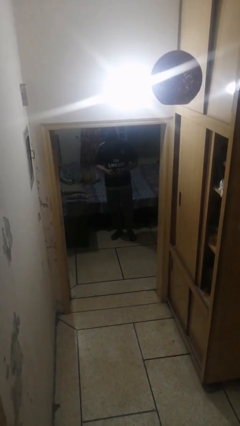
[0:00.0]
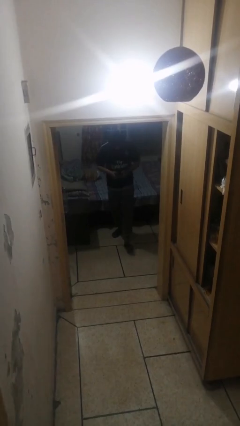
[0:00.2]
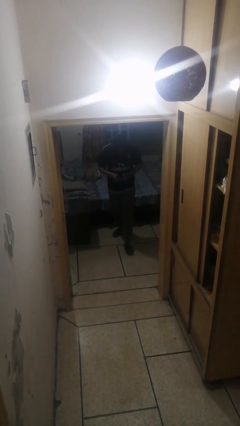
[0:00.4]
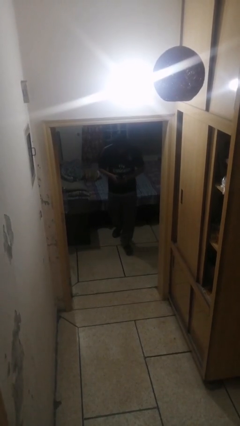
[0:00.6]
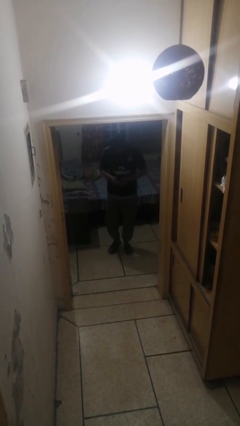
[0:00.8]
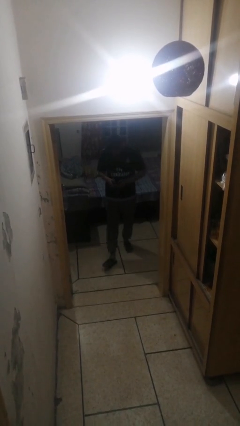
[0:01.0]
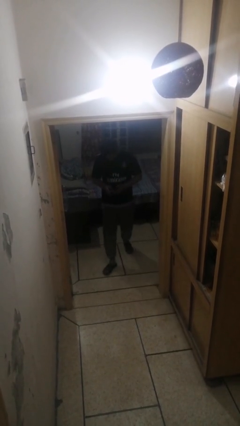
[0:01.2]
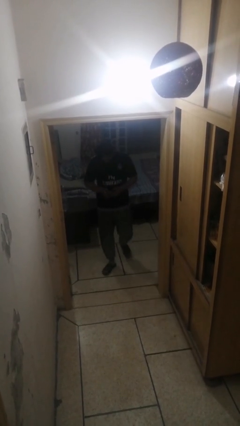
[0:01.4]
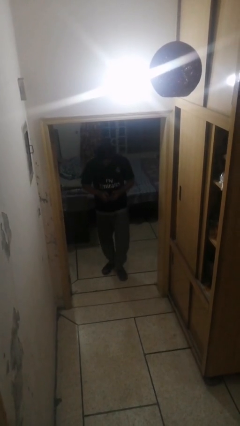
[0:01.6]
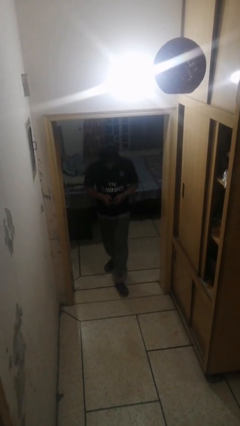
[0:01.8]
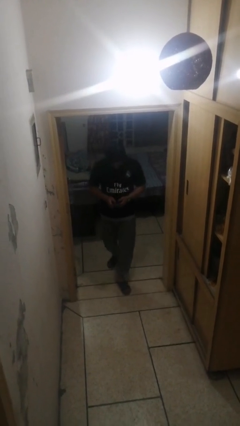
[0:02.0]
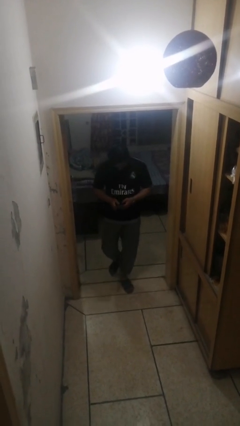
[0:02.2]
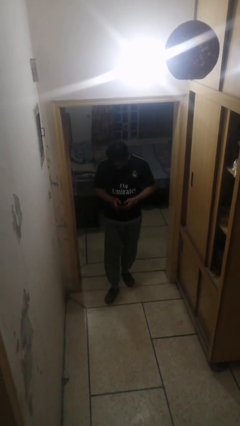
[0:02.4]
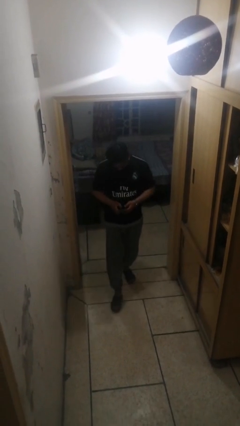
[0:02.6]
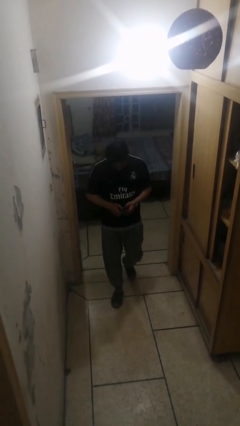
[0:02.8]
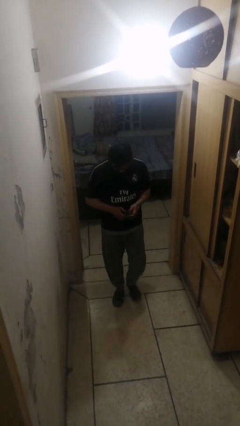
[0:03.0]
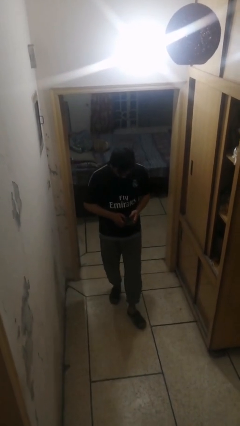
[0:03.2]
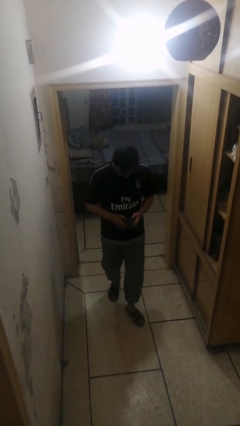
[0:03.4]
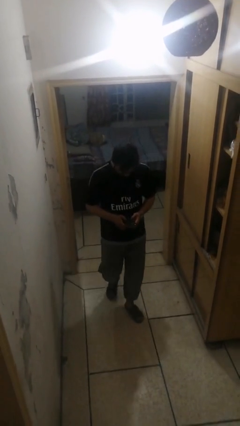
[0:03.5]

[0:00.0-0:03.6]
person enters scene through structure

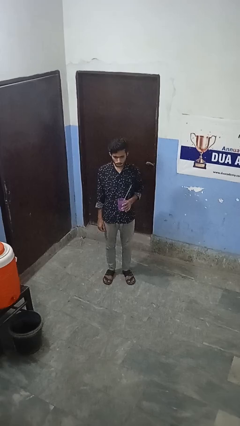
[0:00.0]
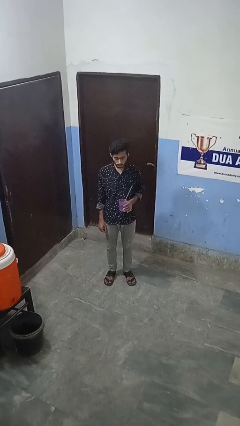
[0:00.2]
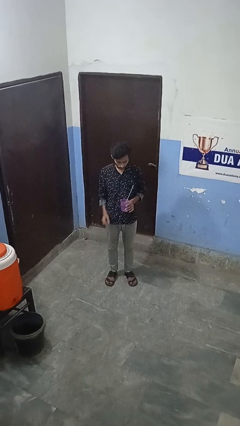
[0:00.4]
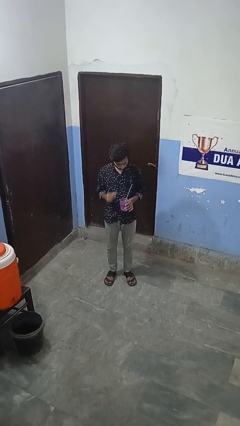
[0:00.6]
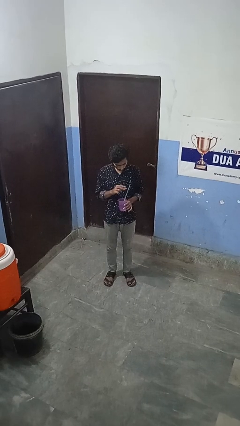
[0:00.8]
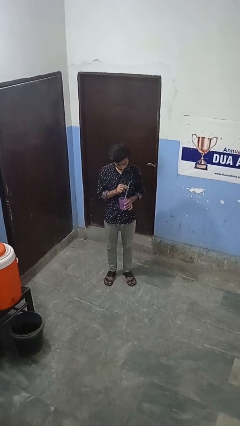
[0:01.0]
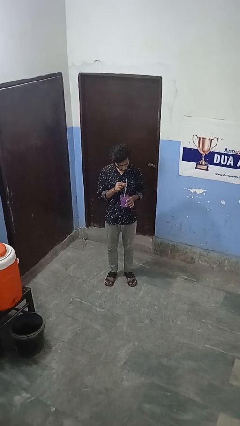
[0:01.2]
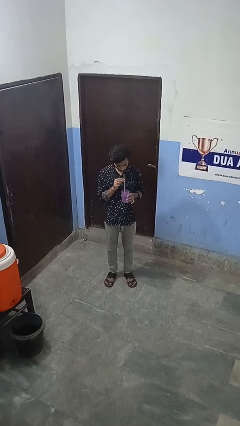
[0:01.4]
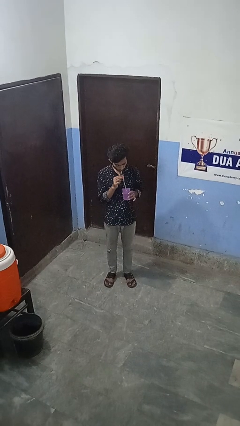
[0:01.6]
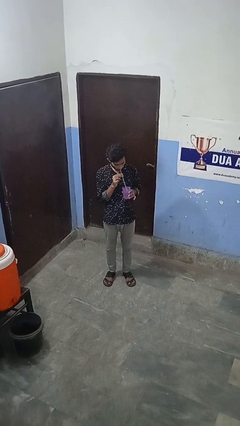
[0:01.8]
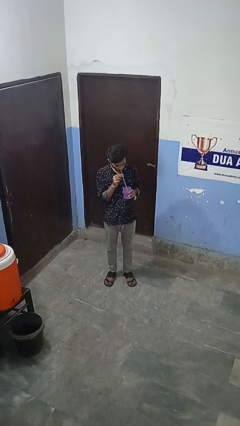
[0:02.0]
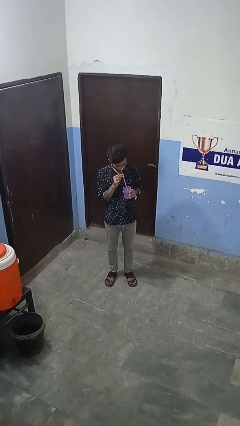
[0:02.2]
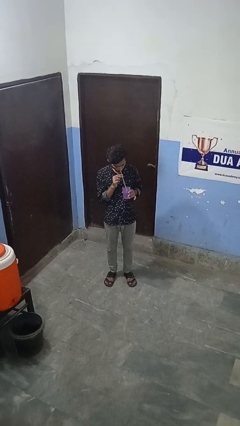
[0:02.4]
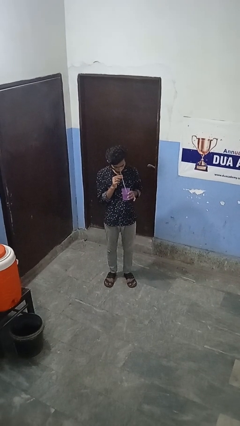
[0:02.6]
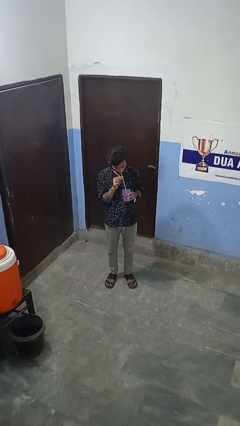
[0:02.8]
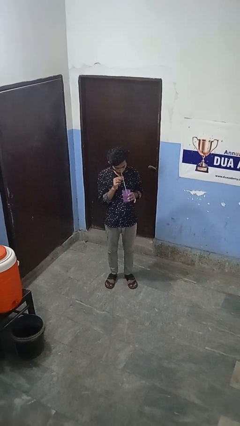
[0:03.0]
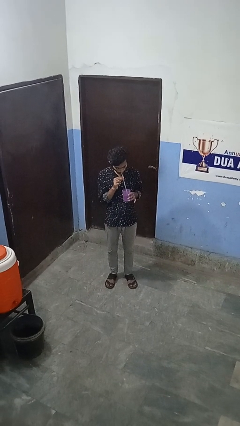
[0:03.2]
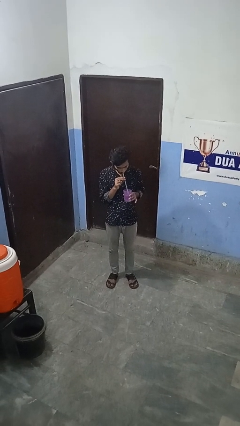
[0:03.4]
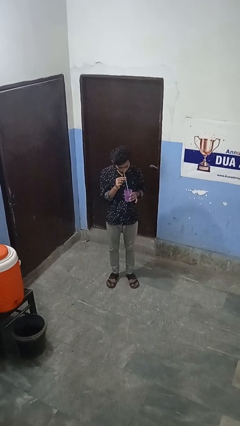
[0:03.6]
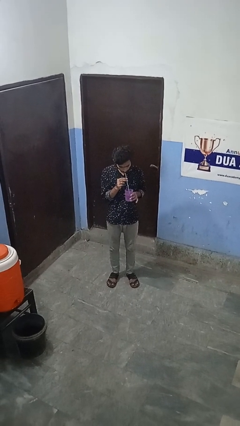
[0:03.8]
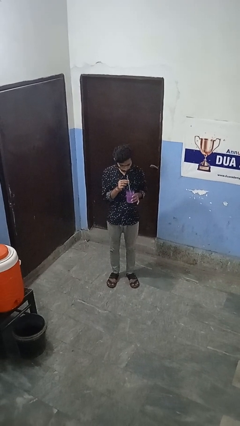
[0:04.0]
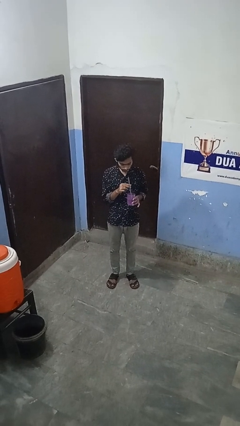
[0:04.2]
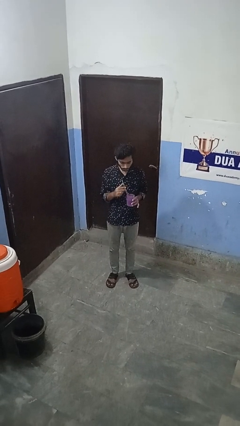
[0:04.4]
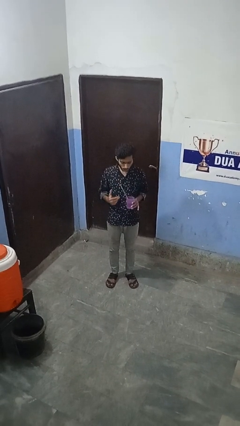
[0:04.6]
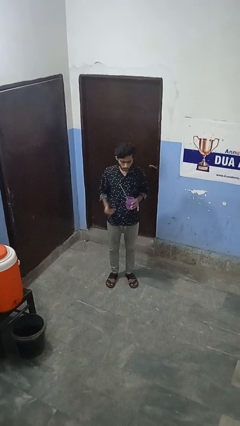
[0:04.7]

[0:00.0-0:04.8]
person drinks from straw

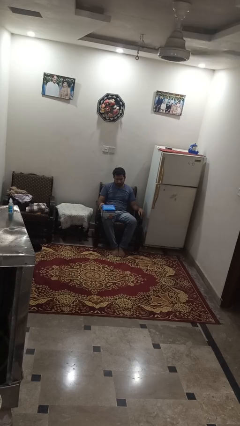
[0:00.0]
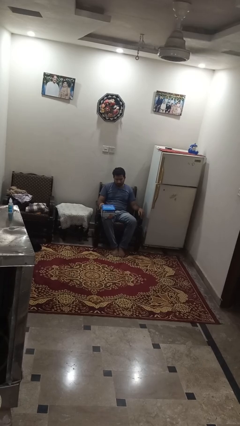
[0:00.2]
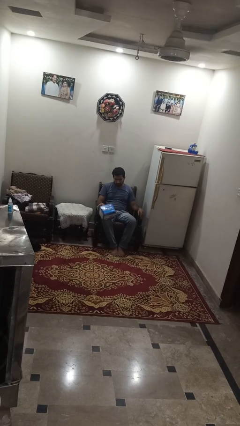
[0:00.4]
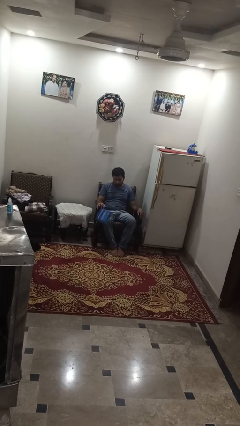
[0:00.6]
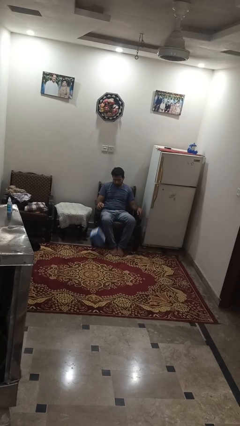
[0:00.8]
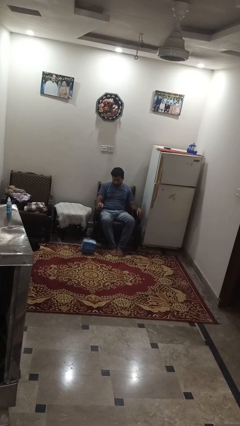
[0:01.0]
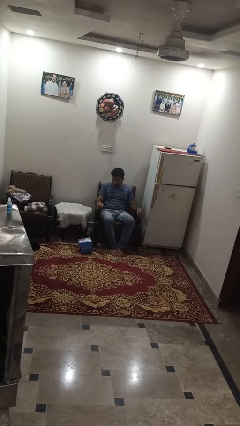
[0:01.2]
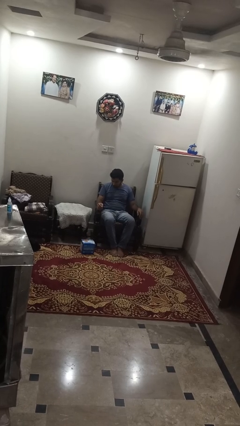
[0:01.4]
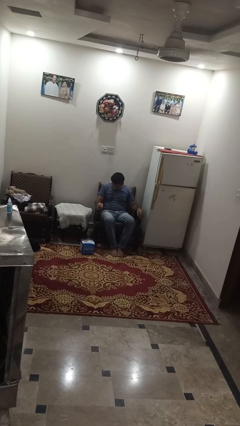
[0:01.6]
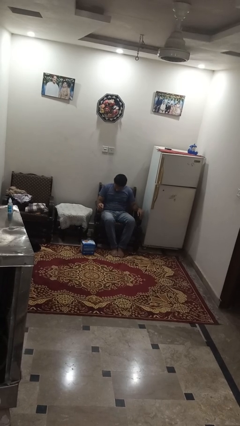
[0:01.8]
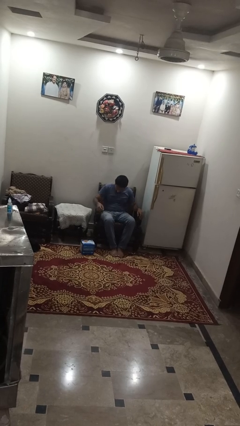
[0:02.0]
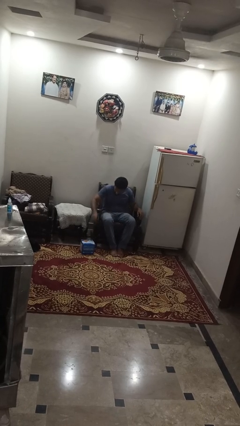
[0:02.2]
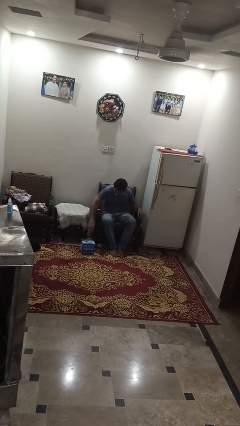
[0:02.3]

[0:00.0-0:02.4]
person drops object

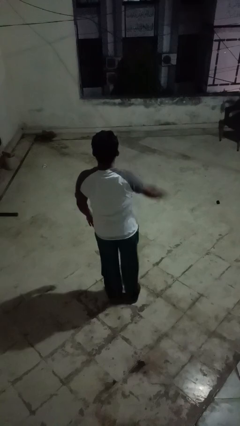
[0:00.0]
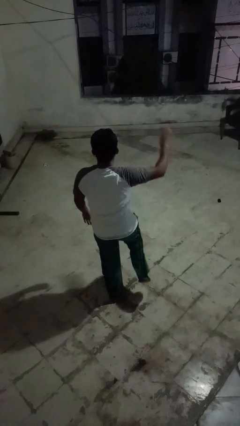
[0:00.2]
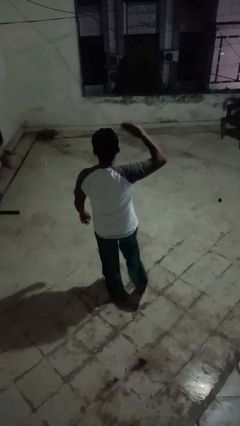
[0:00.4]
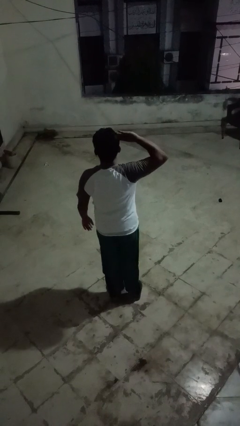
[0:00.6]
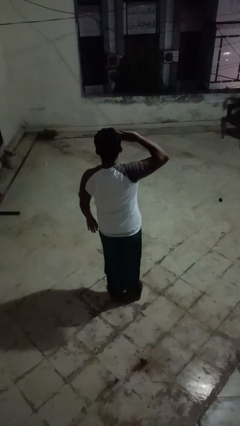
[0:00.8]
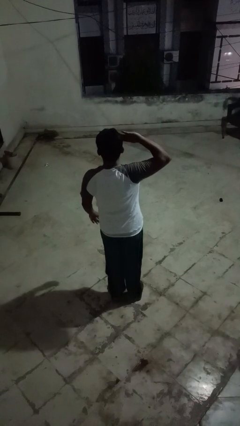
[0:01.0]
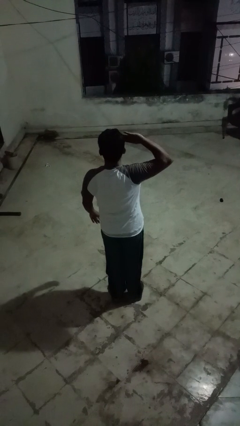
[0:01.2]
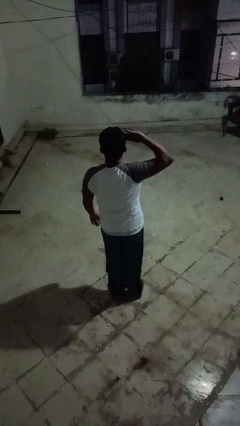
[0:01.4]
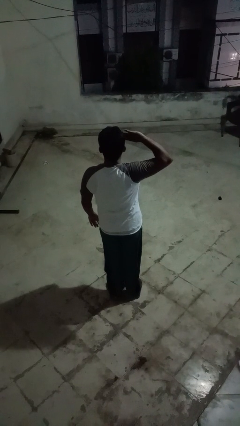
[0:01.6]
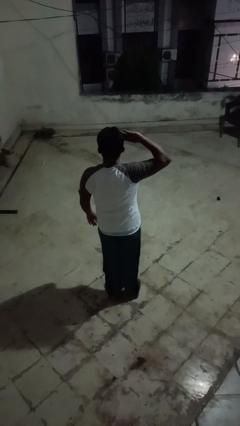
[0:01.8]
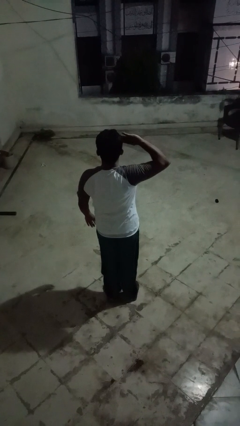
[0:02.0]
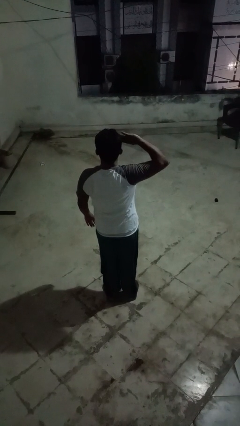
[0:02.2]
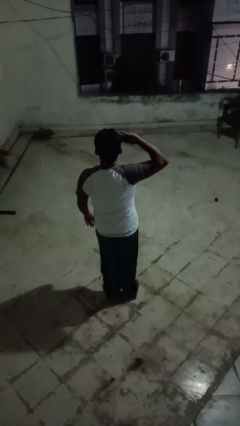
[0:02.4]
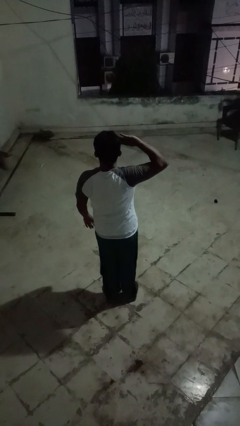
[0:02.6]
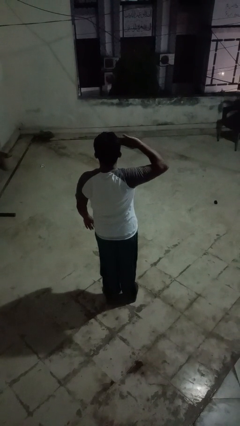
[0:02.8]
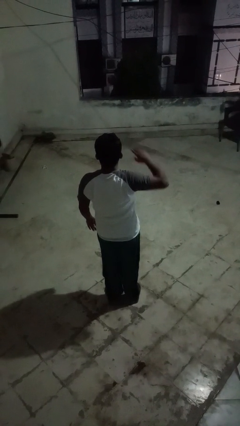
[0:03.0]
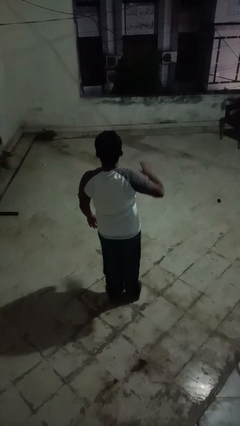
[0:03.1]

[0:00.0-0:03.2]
person salutes

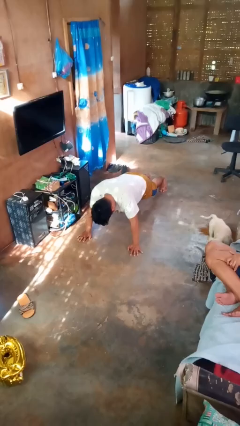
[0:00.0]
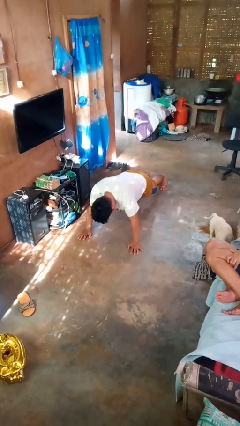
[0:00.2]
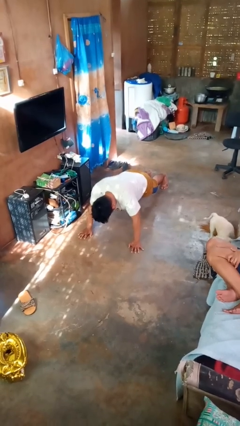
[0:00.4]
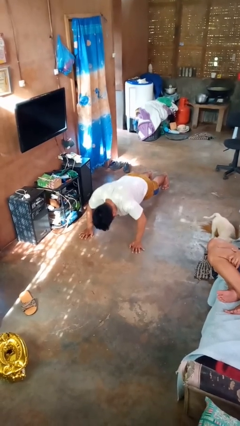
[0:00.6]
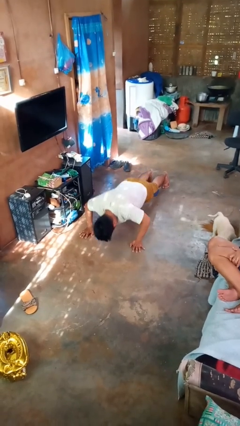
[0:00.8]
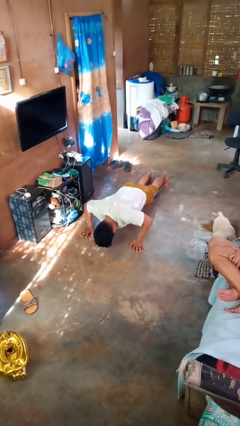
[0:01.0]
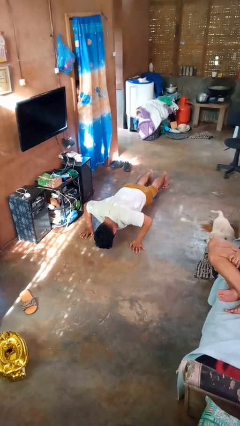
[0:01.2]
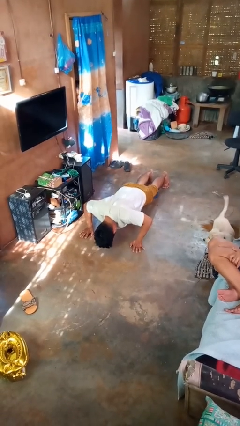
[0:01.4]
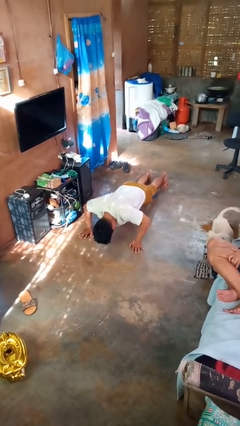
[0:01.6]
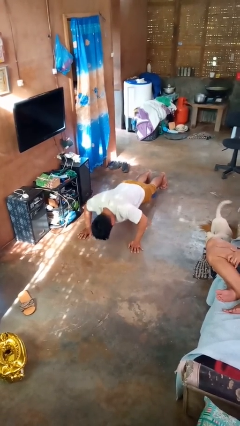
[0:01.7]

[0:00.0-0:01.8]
person exercises with pushup

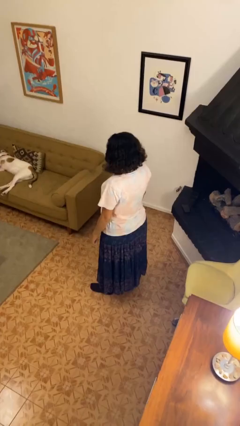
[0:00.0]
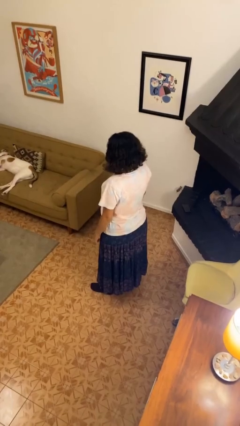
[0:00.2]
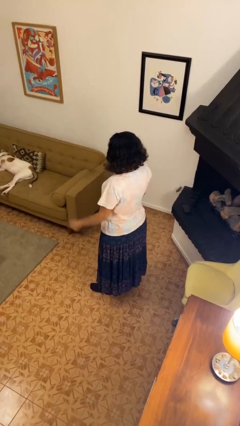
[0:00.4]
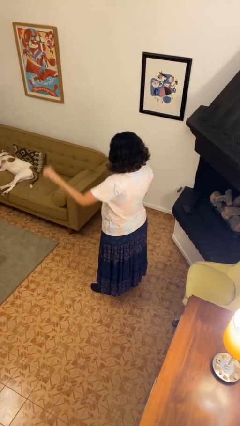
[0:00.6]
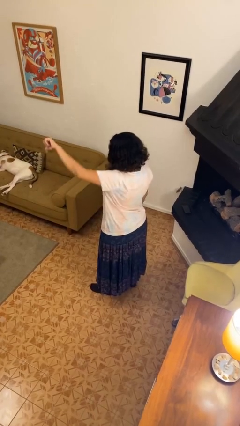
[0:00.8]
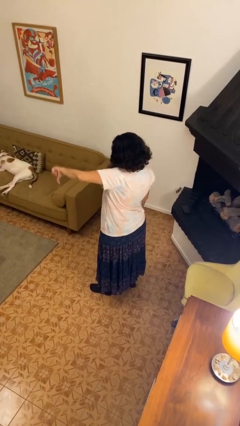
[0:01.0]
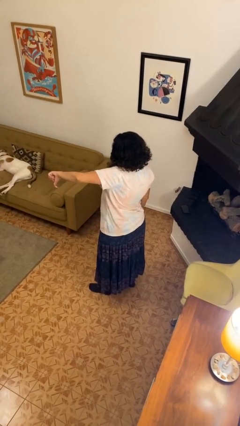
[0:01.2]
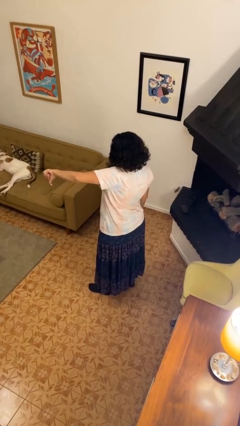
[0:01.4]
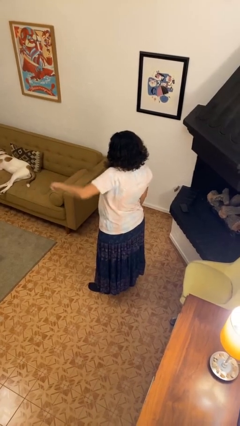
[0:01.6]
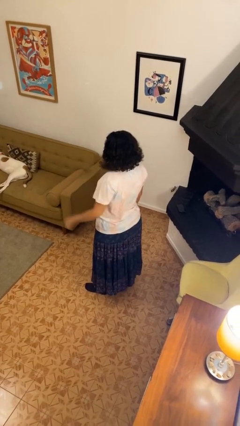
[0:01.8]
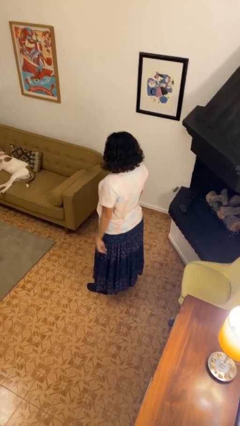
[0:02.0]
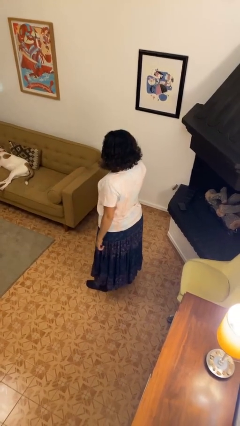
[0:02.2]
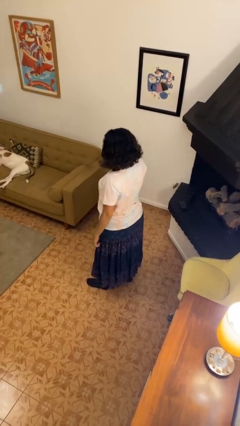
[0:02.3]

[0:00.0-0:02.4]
person gestures thumbs down
